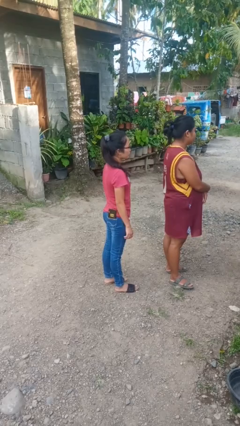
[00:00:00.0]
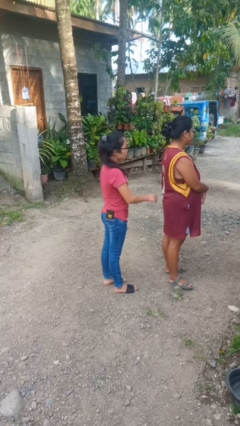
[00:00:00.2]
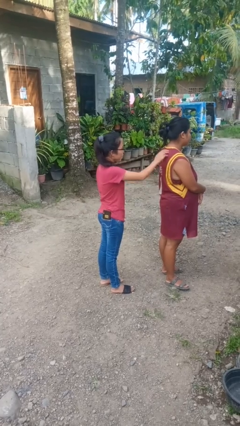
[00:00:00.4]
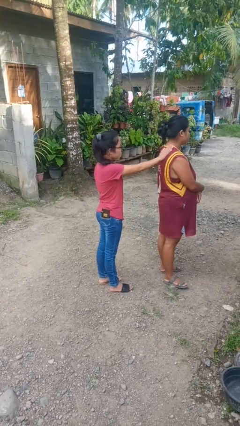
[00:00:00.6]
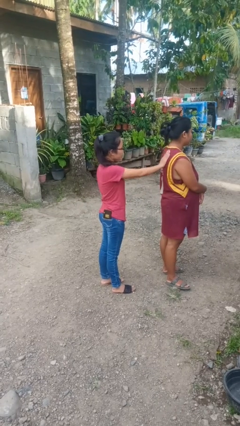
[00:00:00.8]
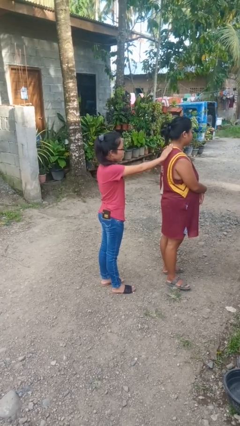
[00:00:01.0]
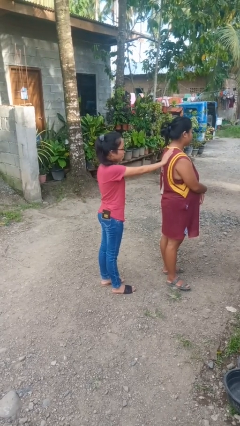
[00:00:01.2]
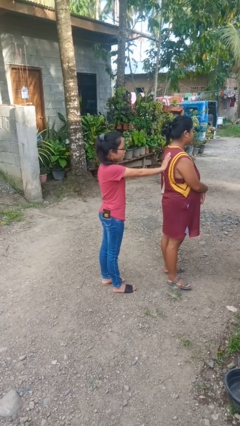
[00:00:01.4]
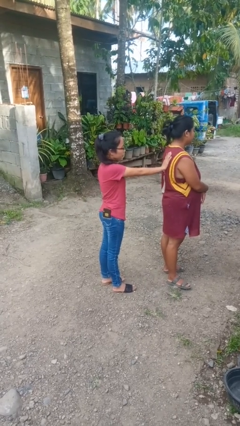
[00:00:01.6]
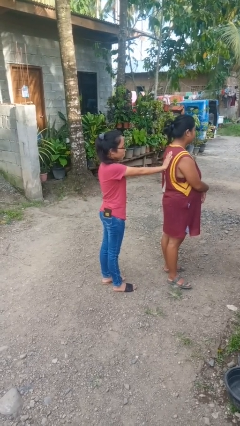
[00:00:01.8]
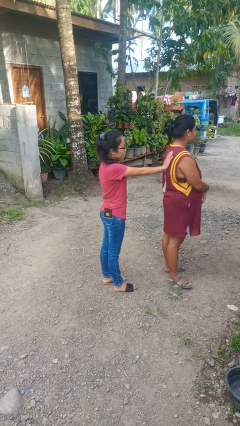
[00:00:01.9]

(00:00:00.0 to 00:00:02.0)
person touches back of person

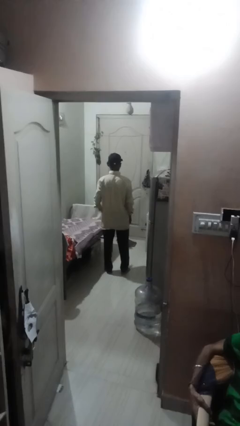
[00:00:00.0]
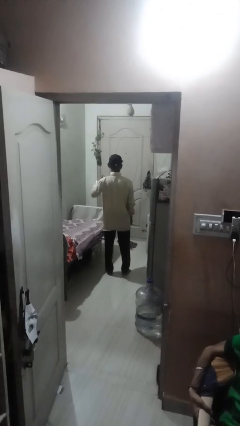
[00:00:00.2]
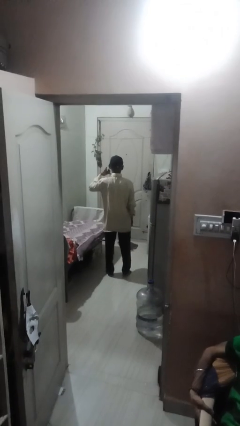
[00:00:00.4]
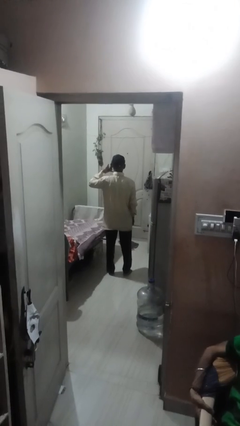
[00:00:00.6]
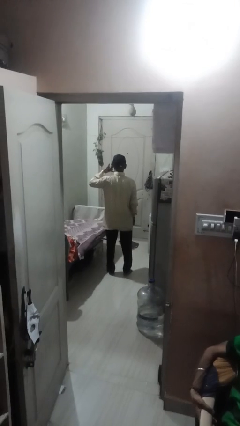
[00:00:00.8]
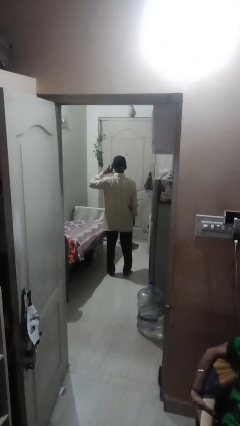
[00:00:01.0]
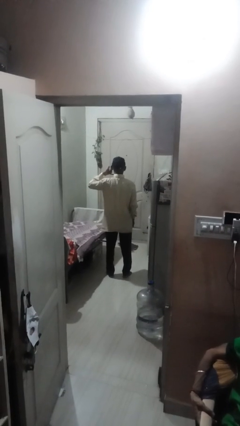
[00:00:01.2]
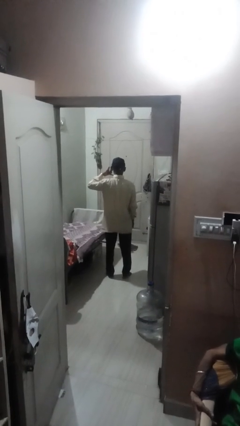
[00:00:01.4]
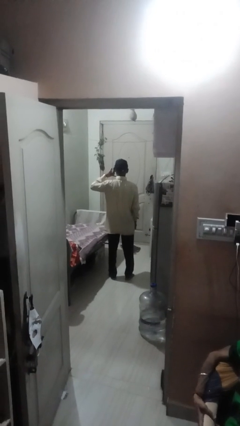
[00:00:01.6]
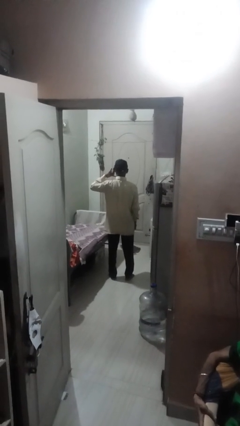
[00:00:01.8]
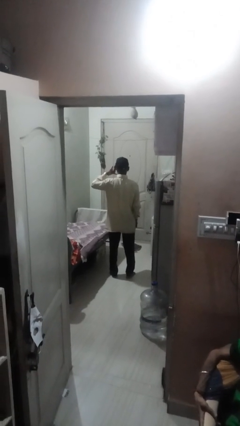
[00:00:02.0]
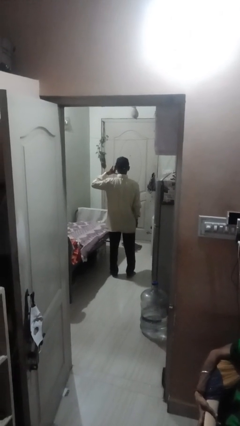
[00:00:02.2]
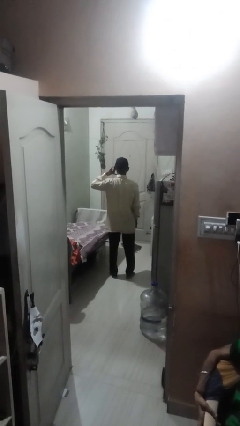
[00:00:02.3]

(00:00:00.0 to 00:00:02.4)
person gestures call me

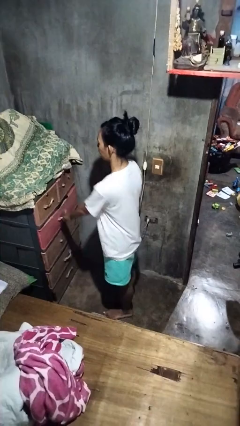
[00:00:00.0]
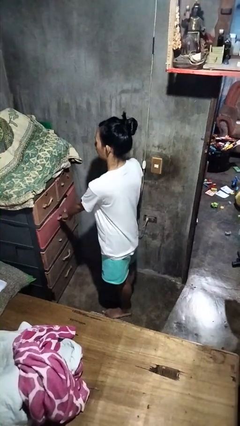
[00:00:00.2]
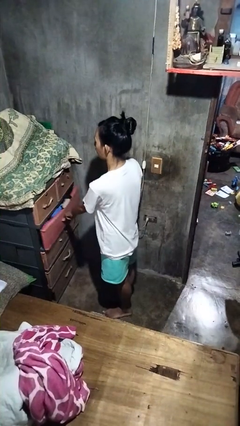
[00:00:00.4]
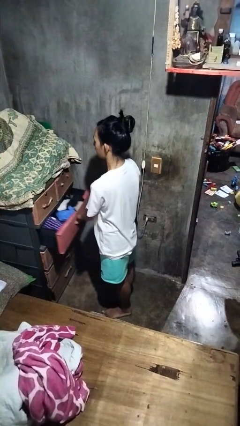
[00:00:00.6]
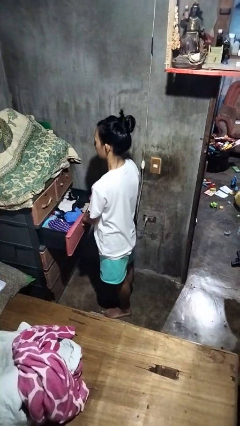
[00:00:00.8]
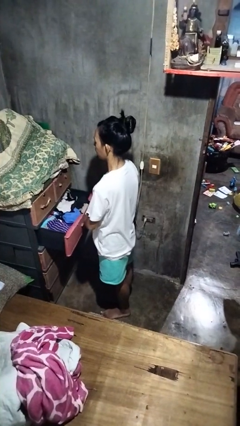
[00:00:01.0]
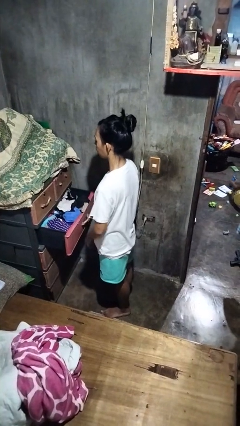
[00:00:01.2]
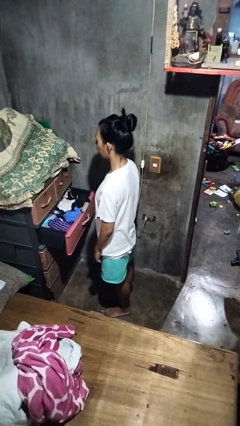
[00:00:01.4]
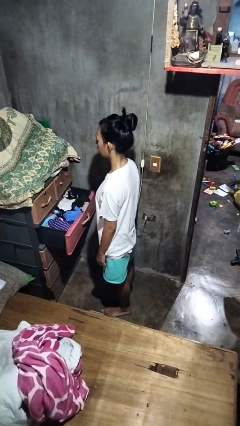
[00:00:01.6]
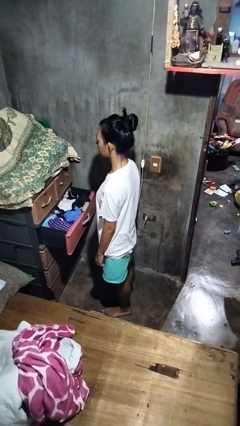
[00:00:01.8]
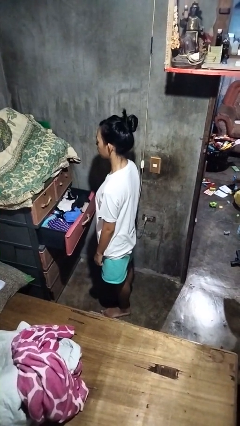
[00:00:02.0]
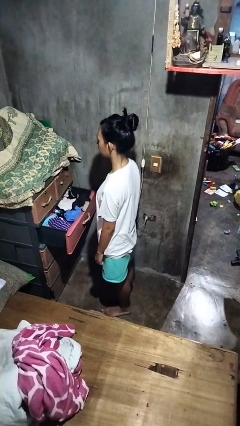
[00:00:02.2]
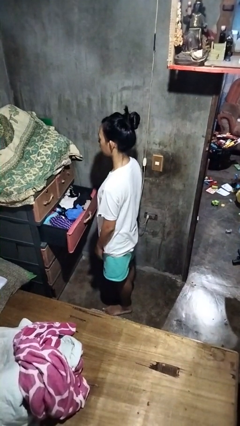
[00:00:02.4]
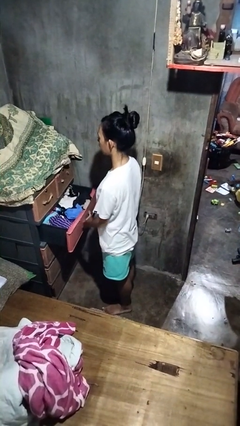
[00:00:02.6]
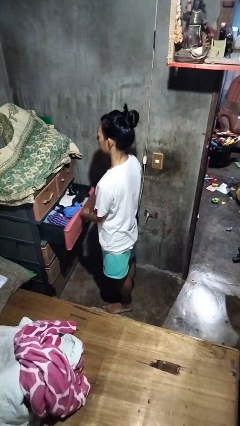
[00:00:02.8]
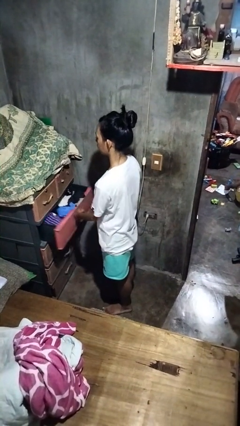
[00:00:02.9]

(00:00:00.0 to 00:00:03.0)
person opens dresser drawer

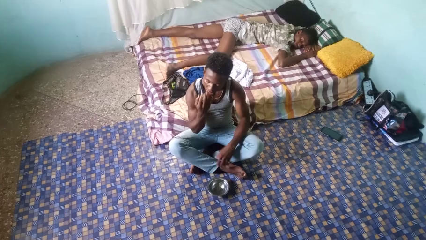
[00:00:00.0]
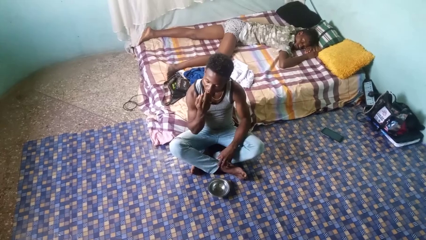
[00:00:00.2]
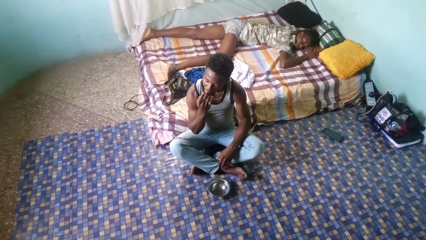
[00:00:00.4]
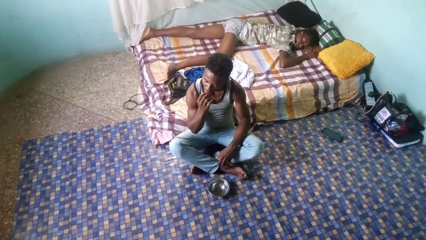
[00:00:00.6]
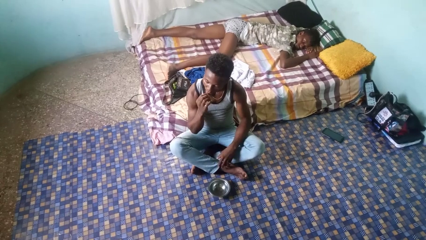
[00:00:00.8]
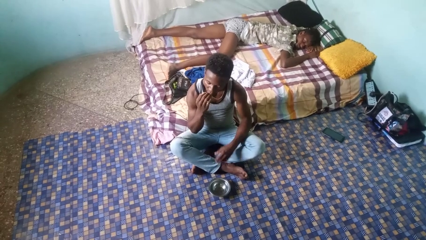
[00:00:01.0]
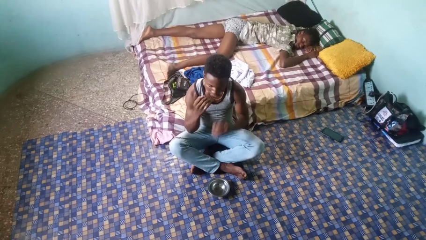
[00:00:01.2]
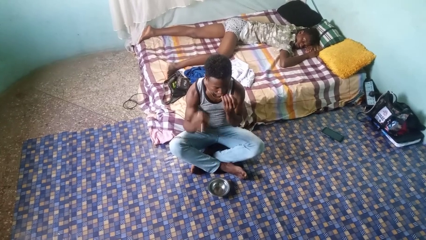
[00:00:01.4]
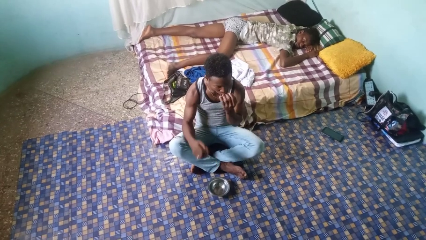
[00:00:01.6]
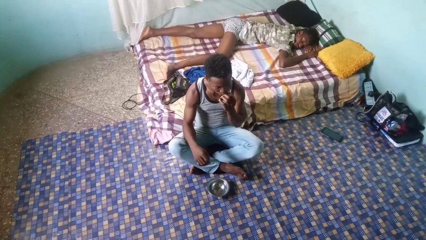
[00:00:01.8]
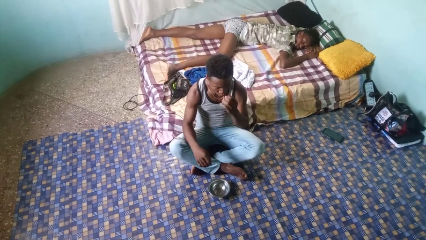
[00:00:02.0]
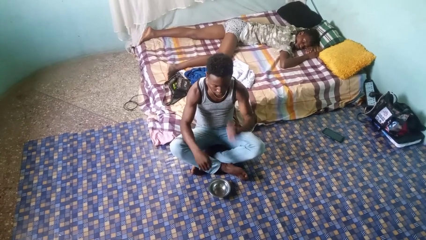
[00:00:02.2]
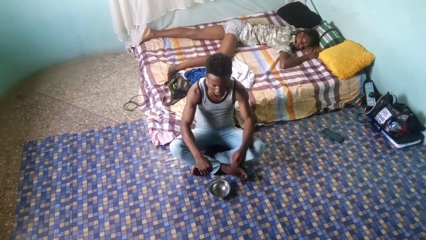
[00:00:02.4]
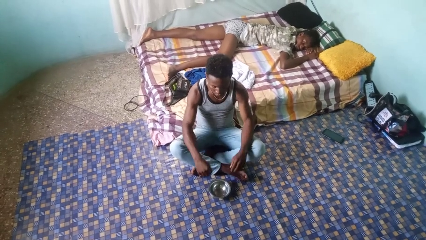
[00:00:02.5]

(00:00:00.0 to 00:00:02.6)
person licks fingers

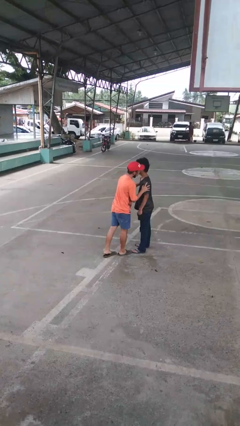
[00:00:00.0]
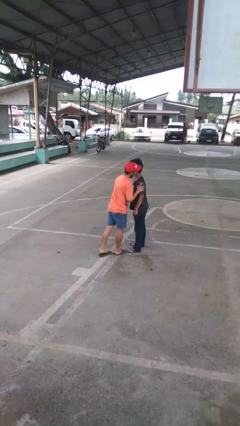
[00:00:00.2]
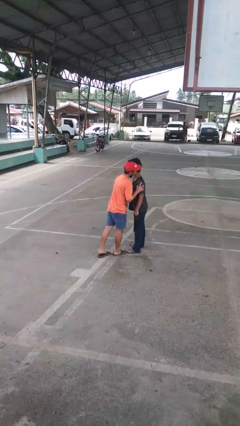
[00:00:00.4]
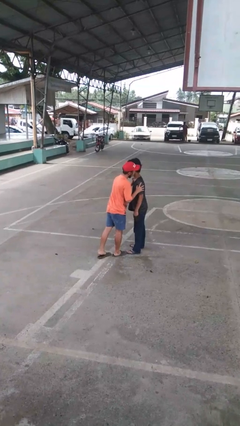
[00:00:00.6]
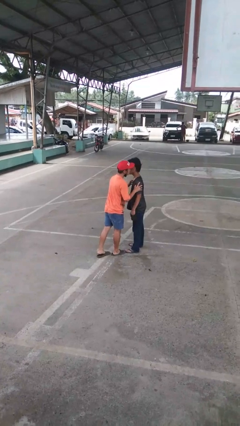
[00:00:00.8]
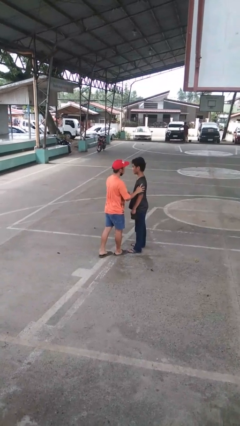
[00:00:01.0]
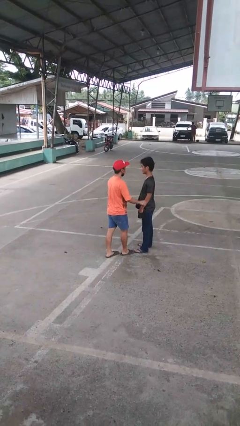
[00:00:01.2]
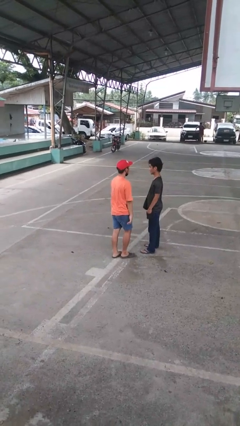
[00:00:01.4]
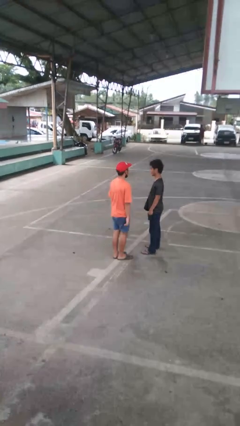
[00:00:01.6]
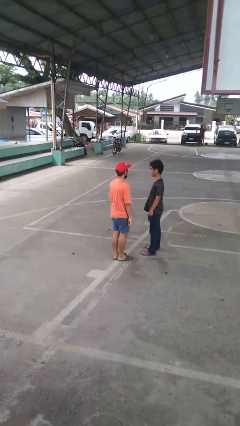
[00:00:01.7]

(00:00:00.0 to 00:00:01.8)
person kisses cheek of person

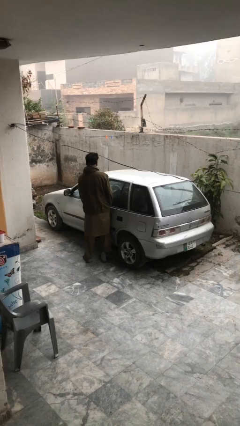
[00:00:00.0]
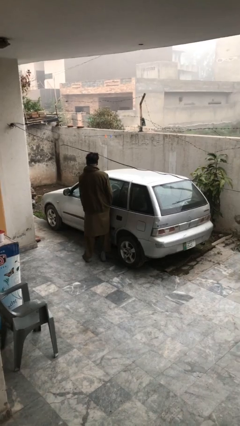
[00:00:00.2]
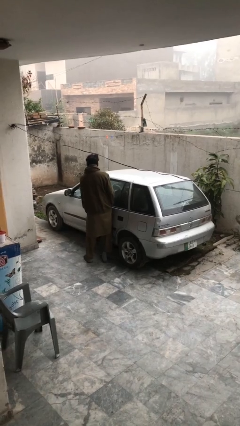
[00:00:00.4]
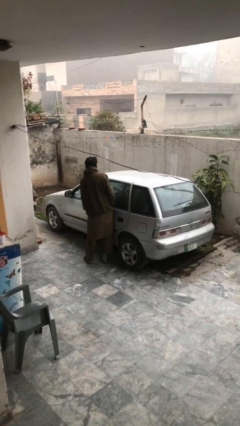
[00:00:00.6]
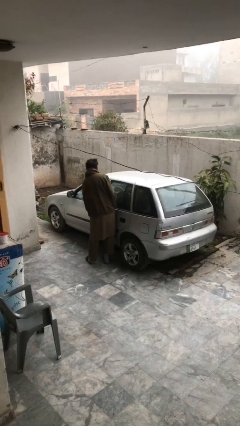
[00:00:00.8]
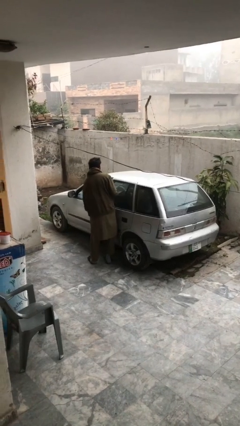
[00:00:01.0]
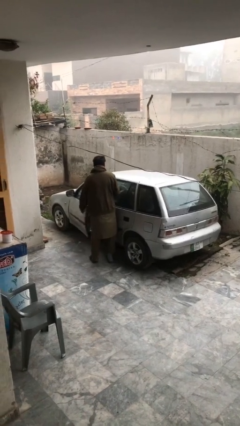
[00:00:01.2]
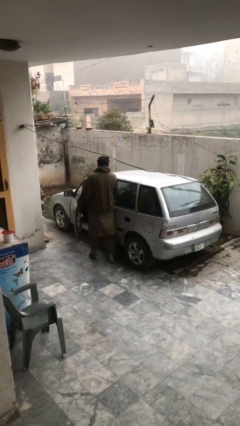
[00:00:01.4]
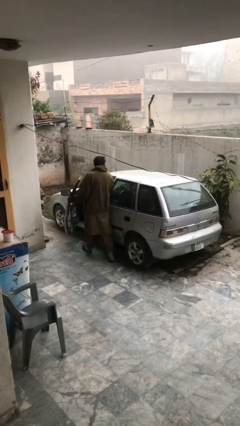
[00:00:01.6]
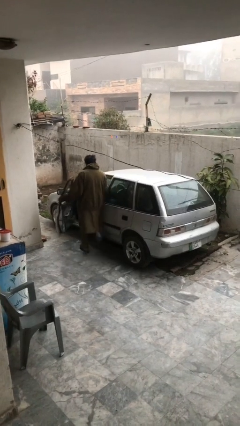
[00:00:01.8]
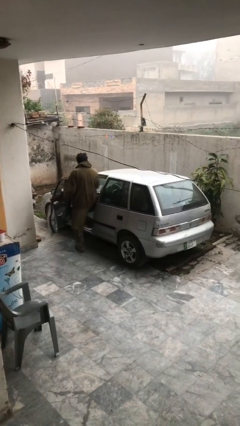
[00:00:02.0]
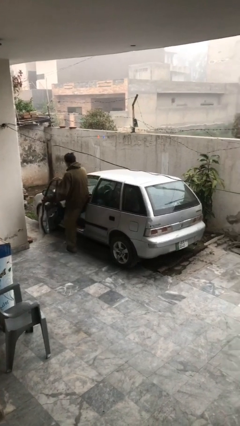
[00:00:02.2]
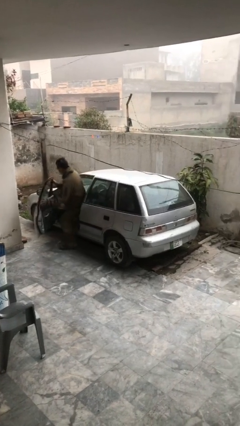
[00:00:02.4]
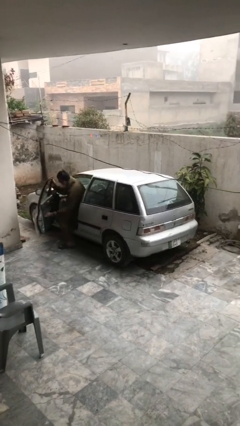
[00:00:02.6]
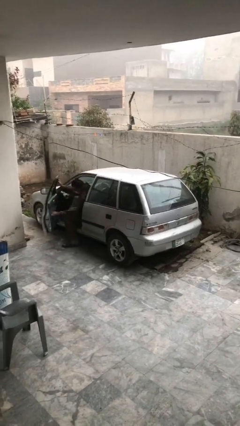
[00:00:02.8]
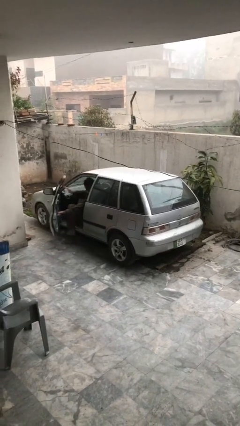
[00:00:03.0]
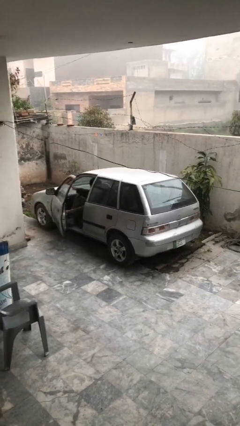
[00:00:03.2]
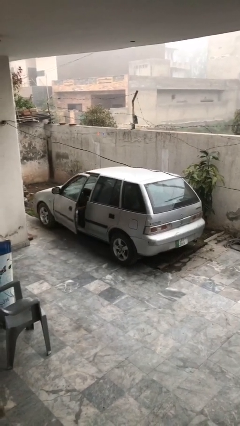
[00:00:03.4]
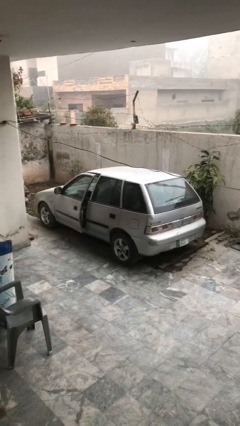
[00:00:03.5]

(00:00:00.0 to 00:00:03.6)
car picks up person

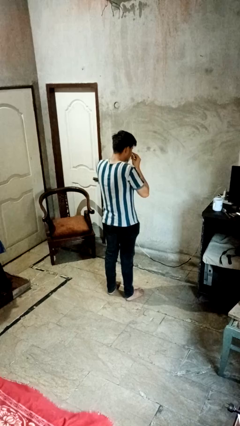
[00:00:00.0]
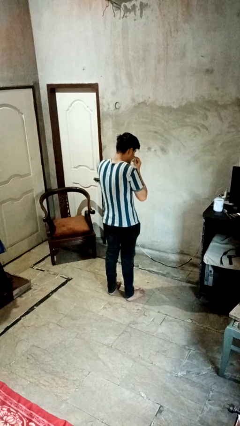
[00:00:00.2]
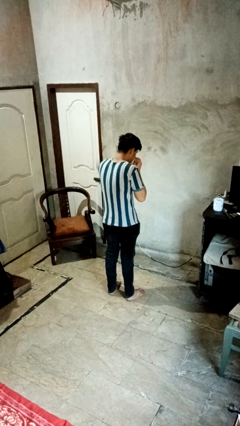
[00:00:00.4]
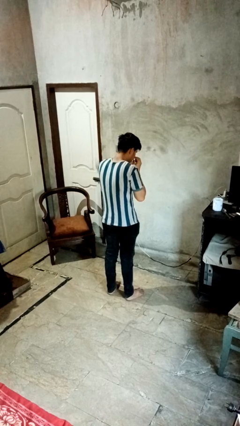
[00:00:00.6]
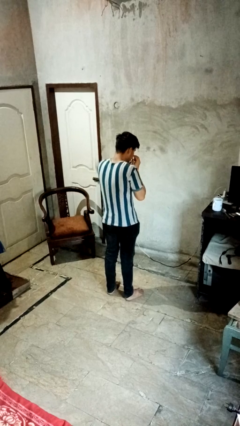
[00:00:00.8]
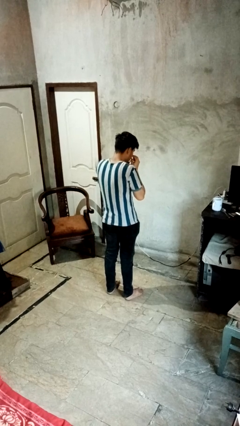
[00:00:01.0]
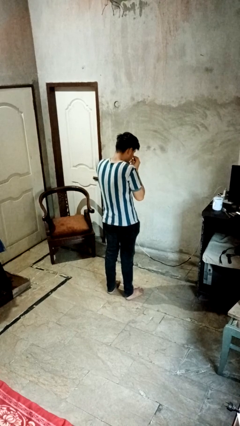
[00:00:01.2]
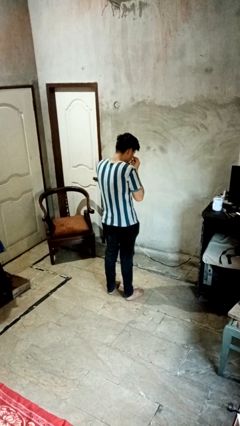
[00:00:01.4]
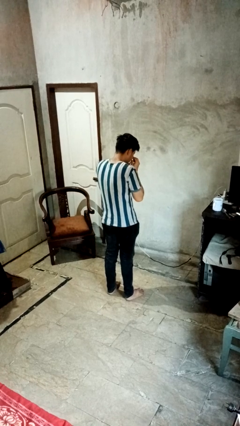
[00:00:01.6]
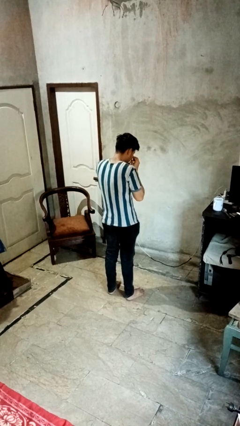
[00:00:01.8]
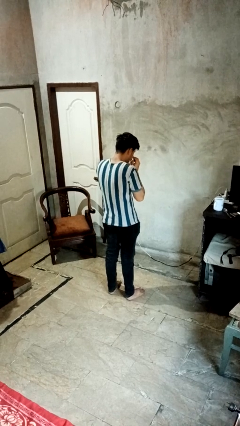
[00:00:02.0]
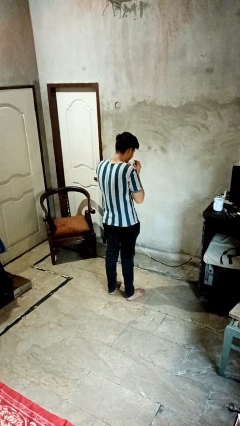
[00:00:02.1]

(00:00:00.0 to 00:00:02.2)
person blows nose
